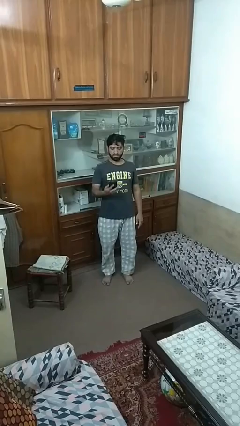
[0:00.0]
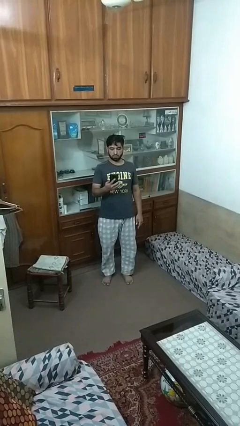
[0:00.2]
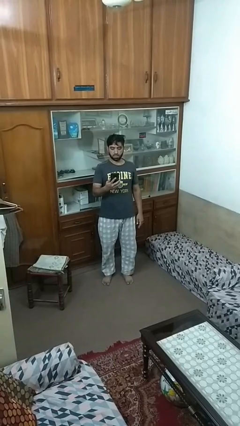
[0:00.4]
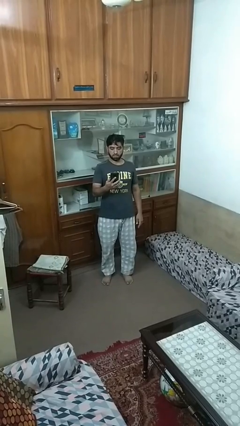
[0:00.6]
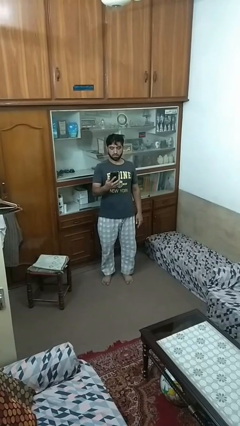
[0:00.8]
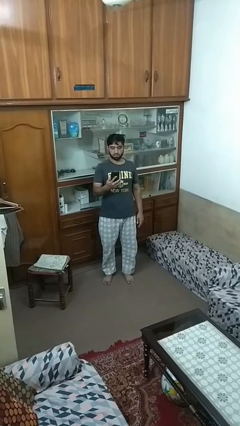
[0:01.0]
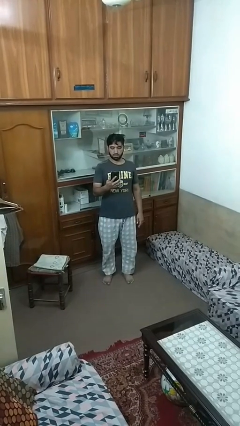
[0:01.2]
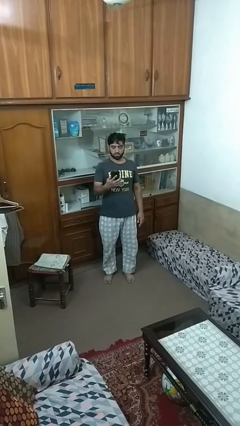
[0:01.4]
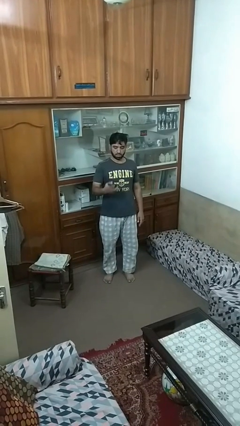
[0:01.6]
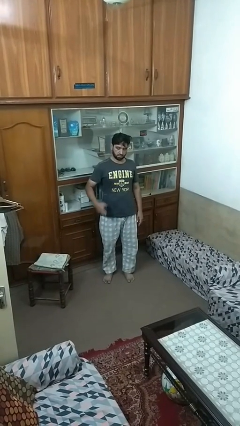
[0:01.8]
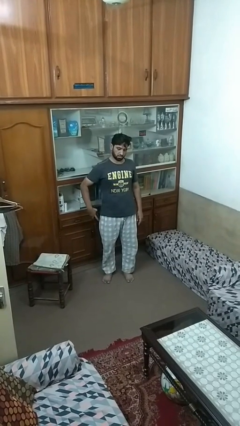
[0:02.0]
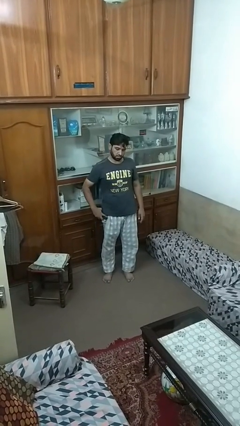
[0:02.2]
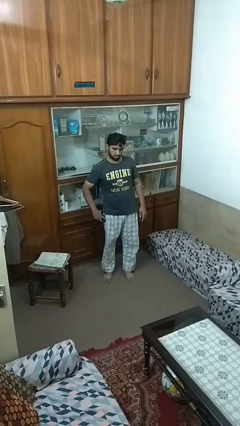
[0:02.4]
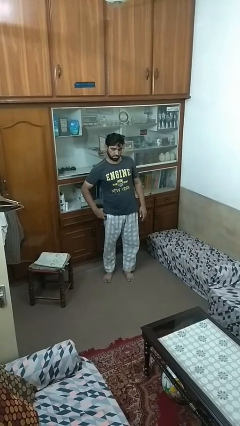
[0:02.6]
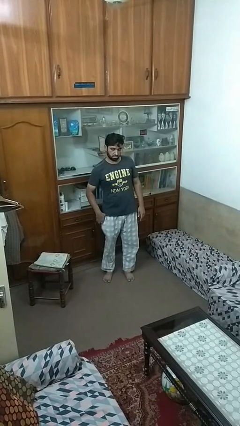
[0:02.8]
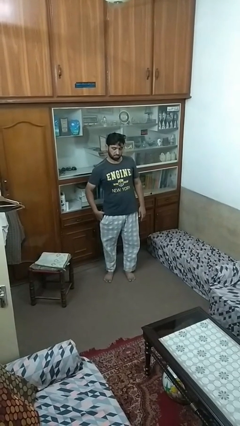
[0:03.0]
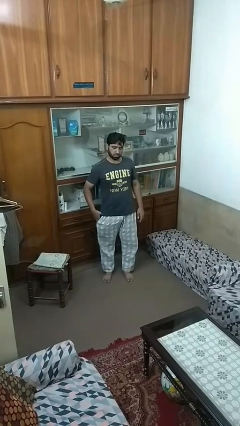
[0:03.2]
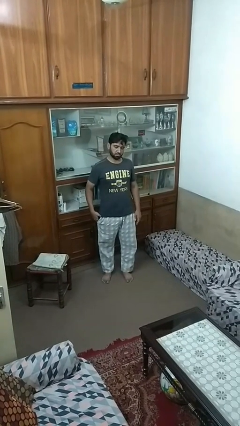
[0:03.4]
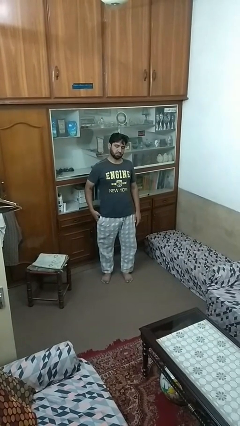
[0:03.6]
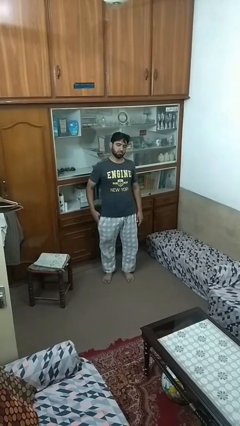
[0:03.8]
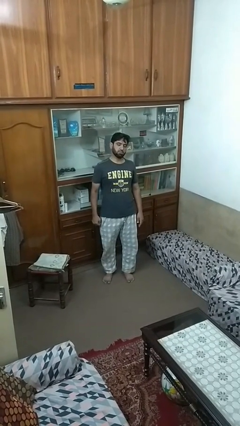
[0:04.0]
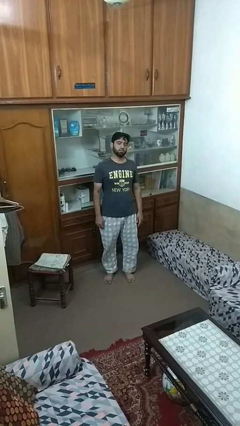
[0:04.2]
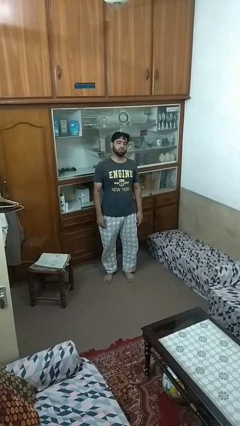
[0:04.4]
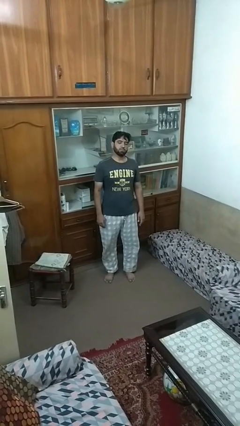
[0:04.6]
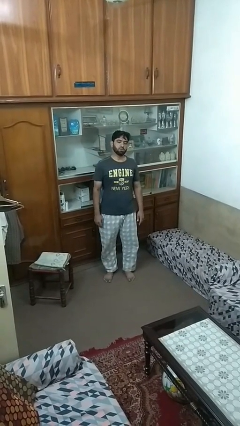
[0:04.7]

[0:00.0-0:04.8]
person puts phone into pocket

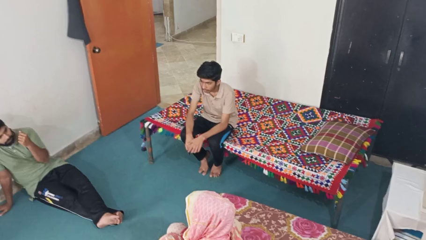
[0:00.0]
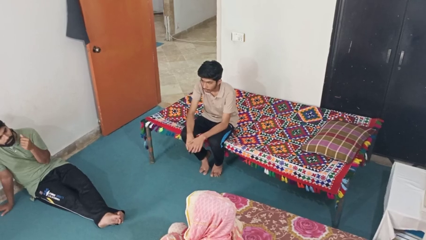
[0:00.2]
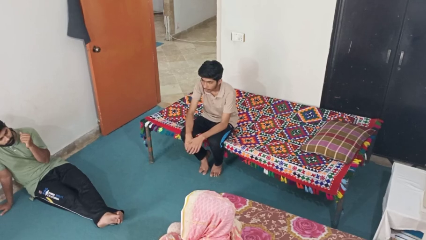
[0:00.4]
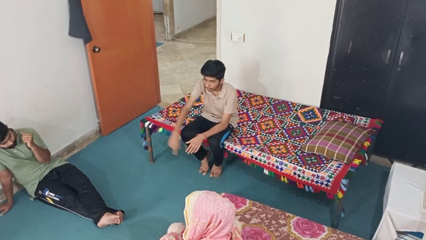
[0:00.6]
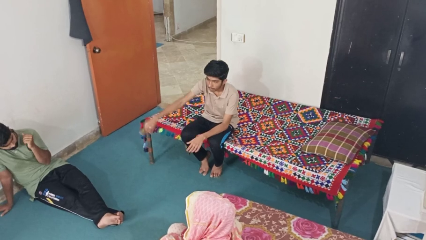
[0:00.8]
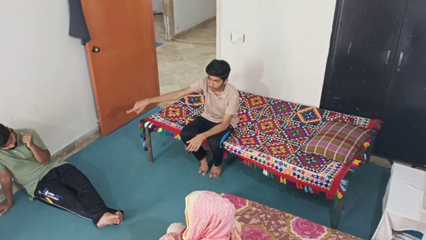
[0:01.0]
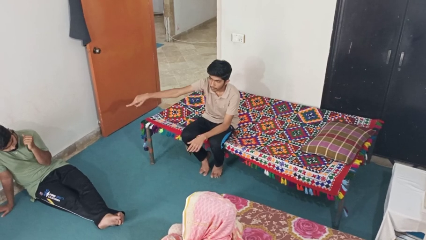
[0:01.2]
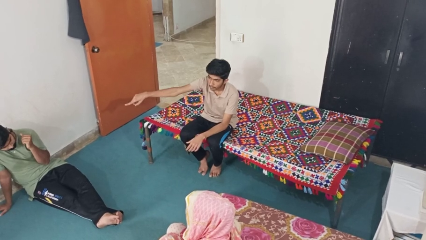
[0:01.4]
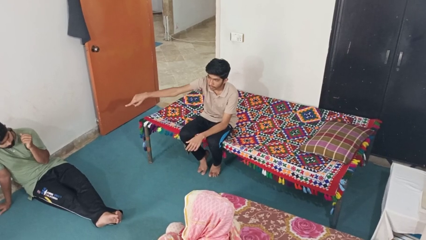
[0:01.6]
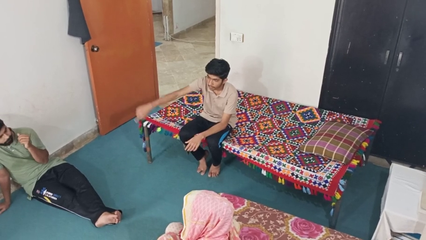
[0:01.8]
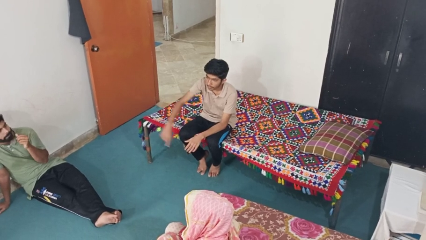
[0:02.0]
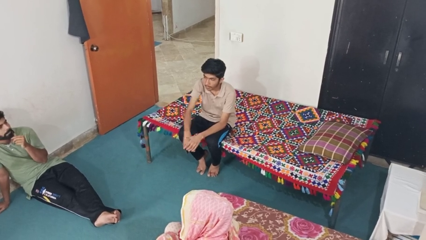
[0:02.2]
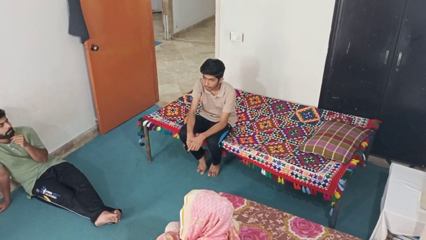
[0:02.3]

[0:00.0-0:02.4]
person points at person

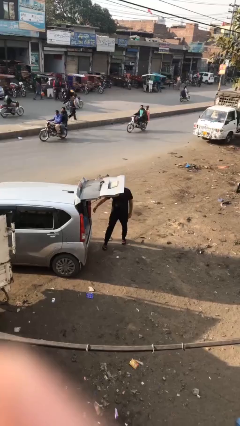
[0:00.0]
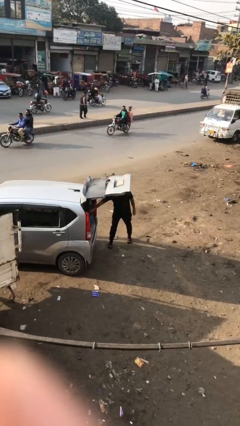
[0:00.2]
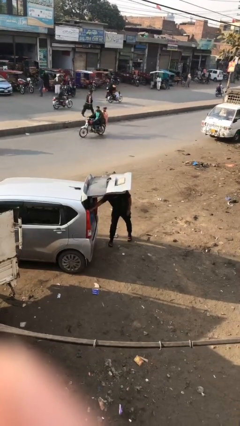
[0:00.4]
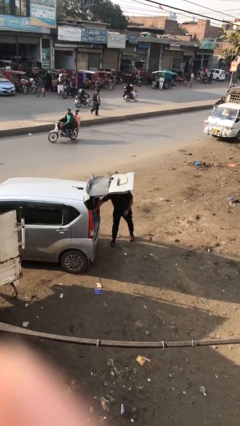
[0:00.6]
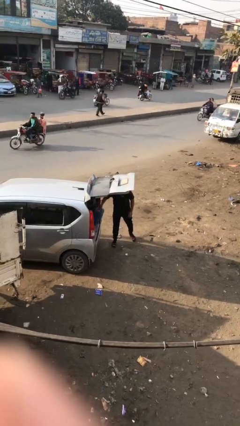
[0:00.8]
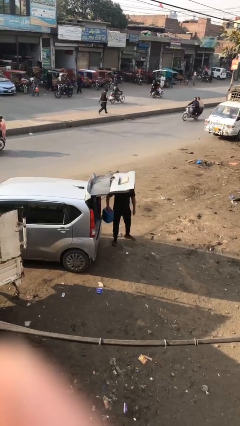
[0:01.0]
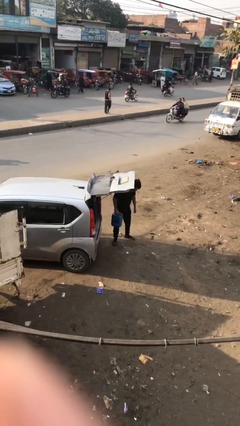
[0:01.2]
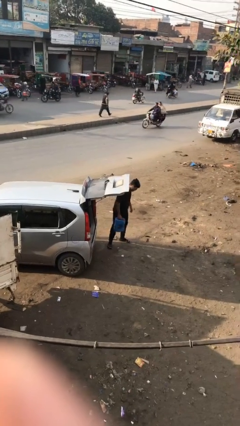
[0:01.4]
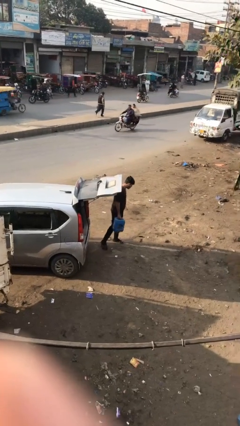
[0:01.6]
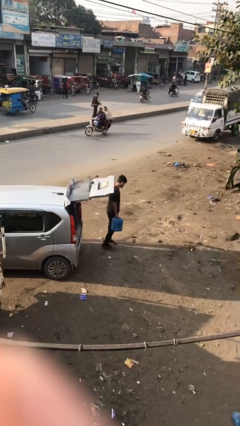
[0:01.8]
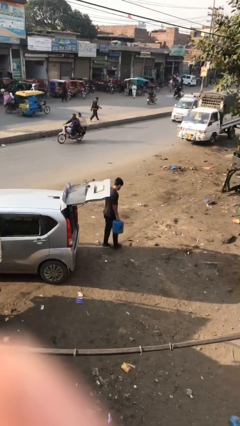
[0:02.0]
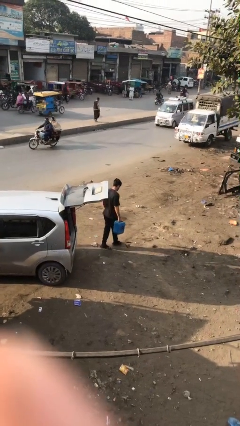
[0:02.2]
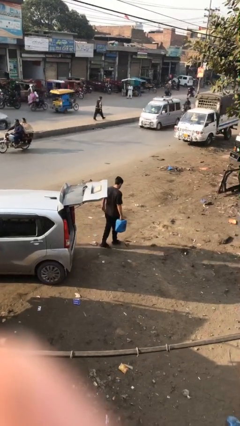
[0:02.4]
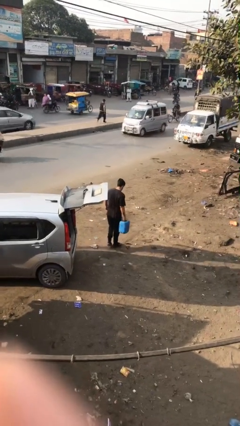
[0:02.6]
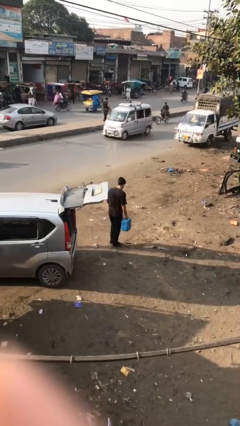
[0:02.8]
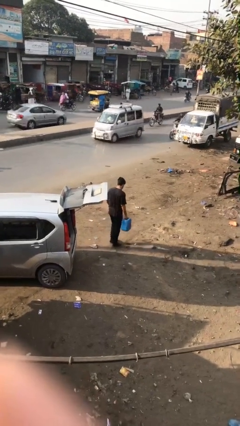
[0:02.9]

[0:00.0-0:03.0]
person unloads car

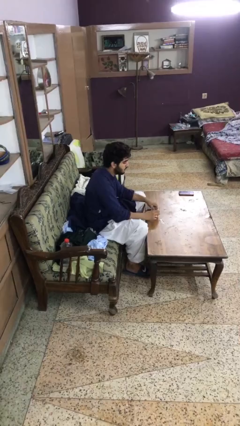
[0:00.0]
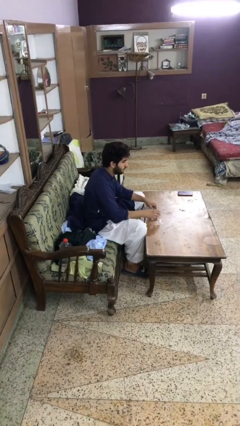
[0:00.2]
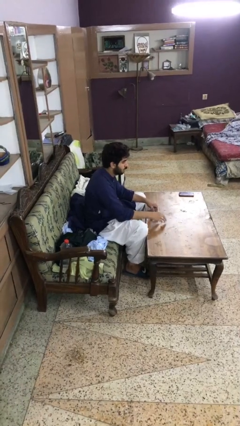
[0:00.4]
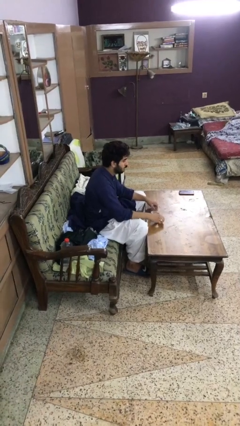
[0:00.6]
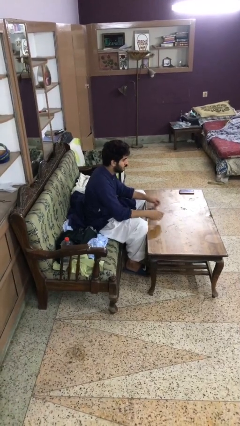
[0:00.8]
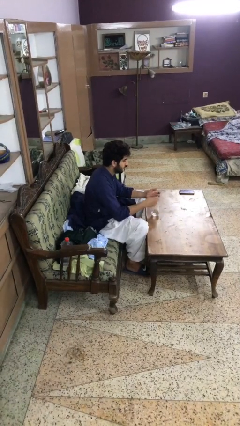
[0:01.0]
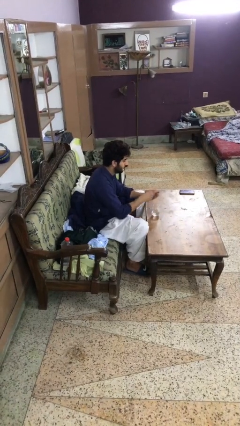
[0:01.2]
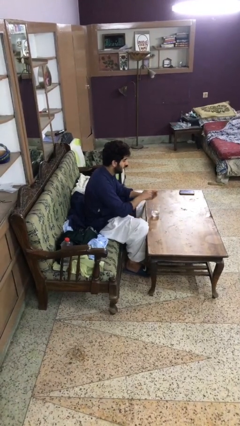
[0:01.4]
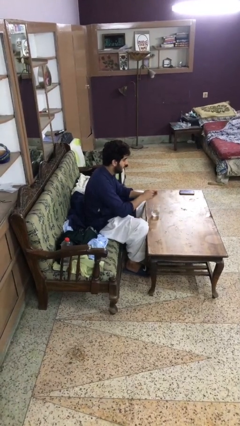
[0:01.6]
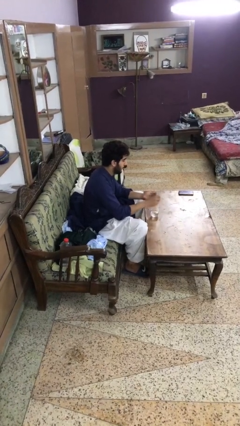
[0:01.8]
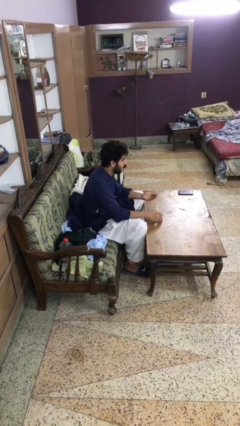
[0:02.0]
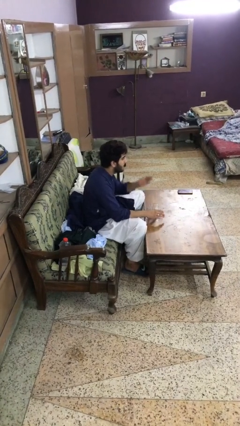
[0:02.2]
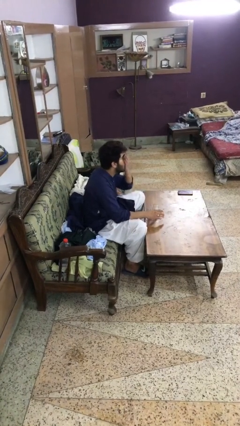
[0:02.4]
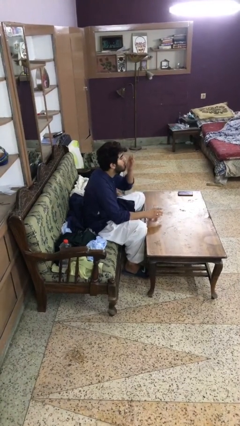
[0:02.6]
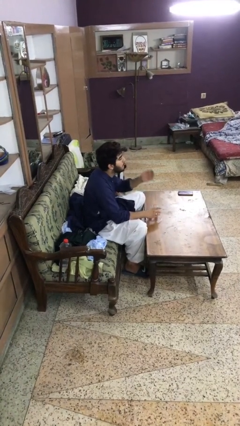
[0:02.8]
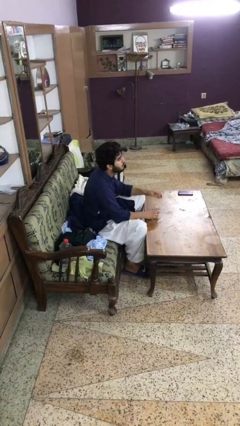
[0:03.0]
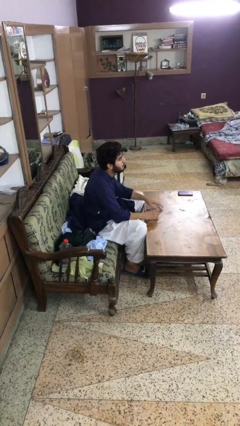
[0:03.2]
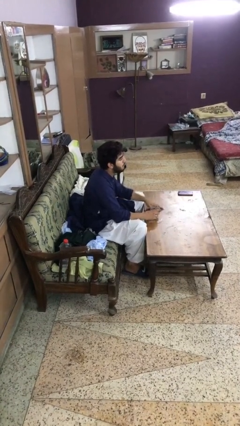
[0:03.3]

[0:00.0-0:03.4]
person takes medicine pills

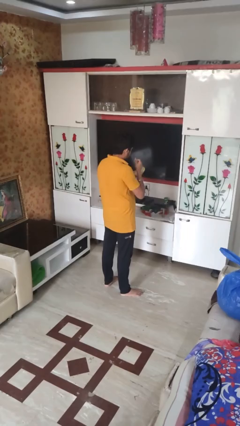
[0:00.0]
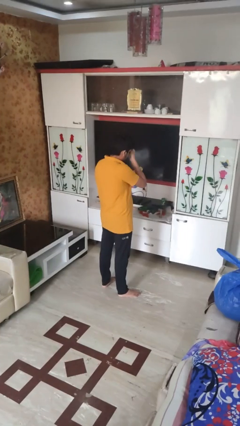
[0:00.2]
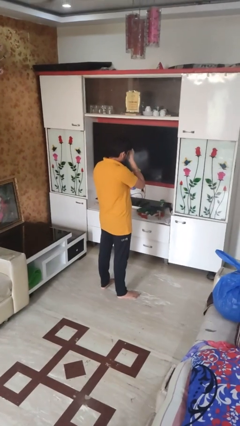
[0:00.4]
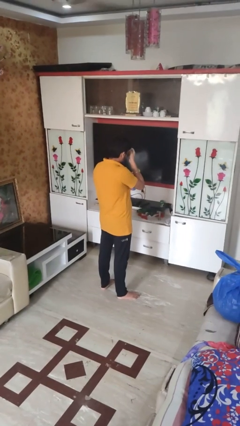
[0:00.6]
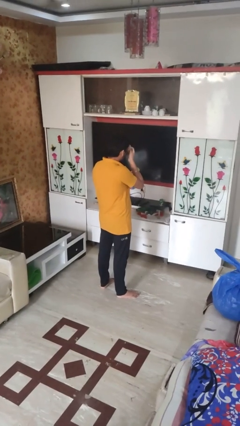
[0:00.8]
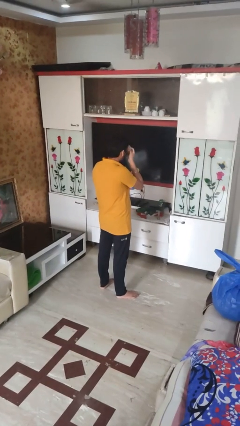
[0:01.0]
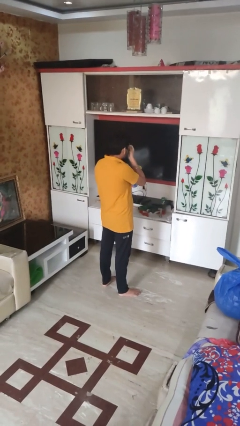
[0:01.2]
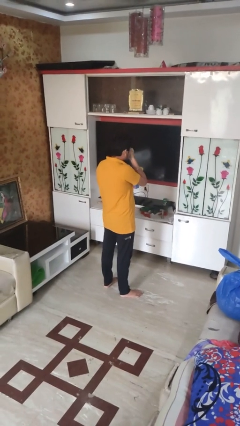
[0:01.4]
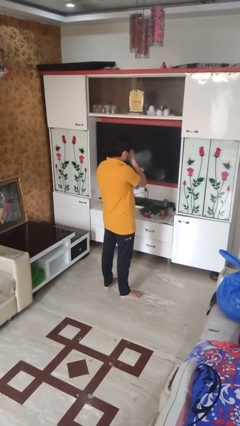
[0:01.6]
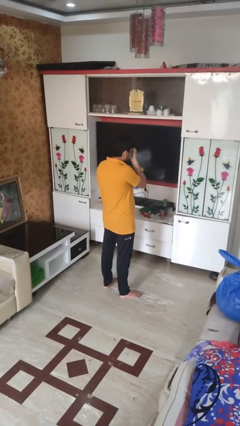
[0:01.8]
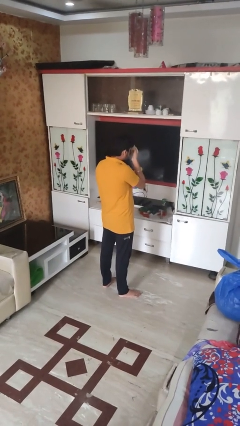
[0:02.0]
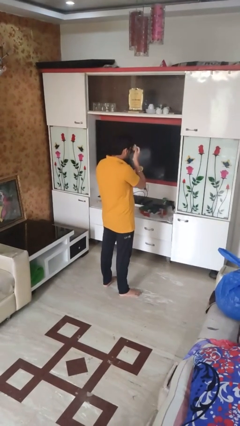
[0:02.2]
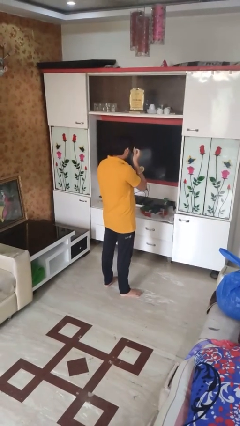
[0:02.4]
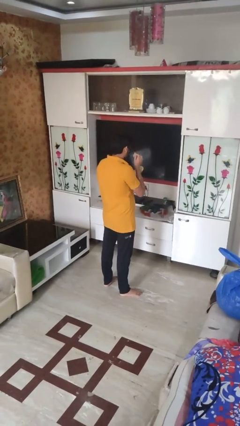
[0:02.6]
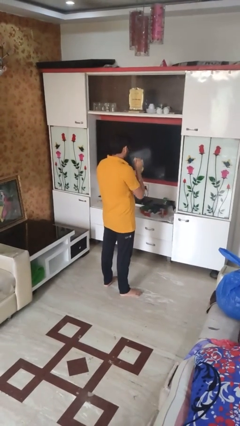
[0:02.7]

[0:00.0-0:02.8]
person applies foundation makeup

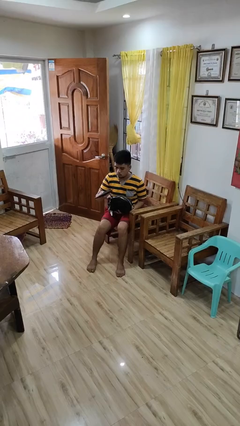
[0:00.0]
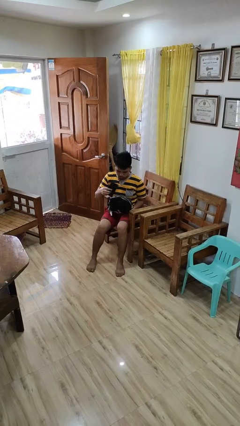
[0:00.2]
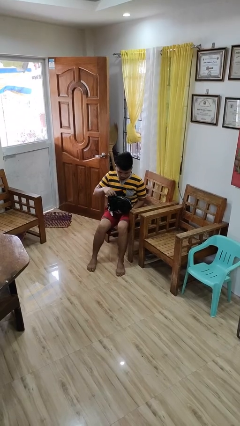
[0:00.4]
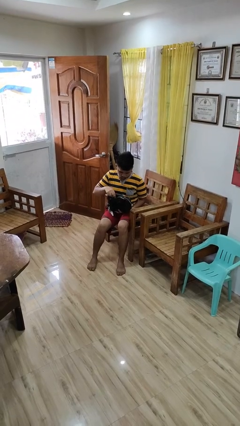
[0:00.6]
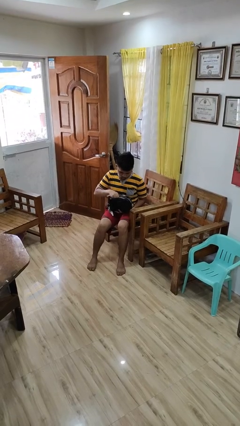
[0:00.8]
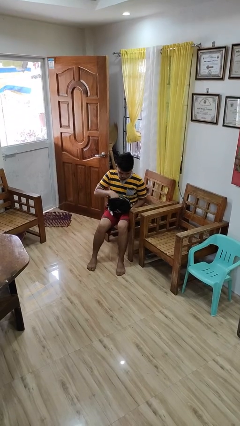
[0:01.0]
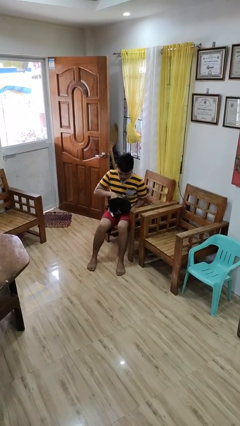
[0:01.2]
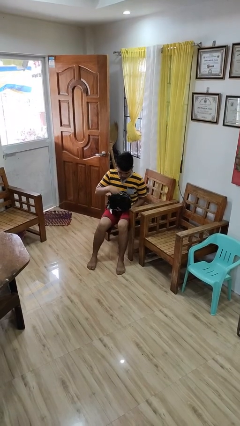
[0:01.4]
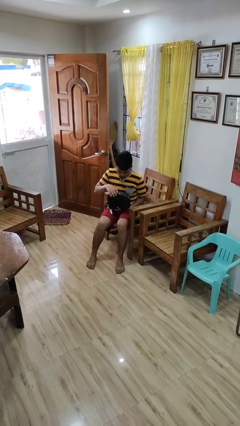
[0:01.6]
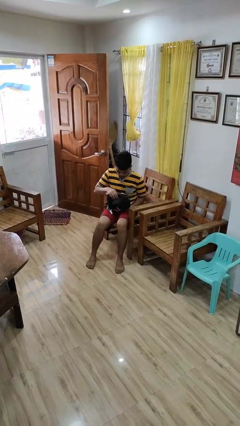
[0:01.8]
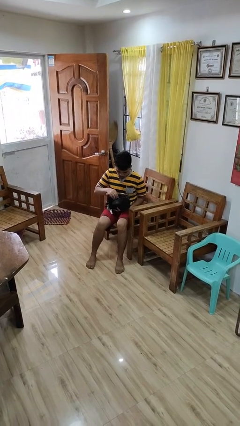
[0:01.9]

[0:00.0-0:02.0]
person puts object into purse
